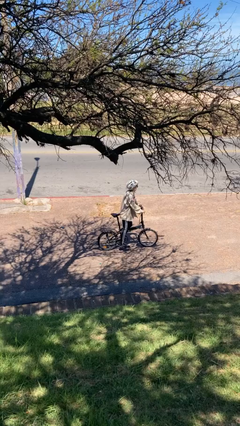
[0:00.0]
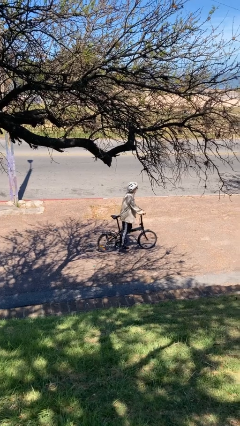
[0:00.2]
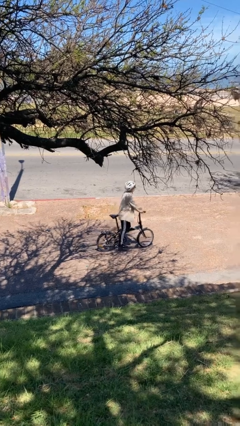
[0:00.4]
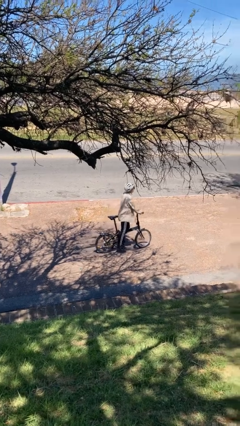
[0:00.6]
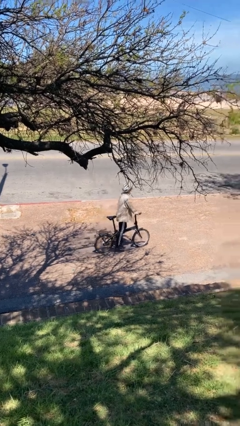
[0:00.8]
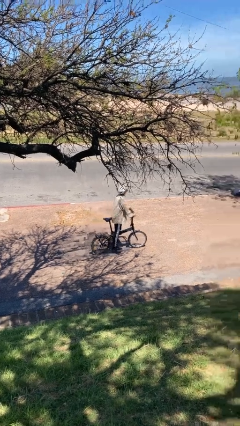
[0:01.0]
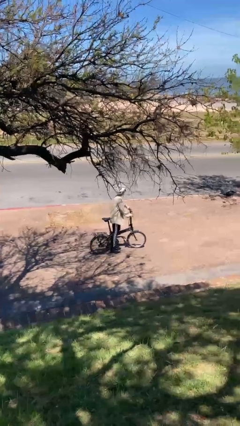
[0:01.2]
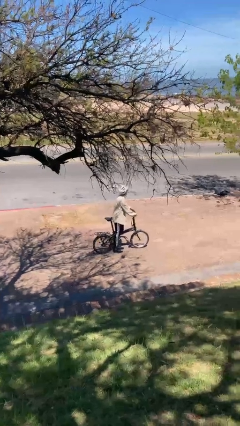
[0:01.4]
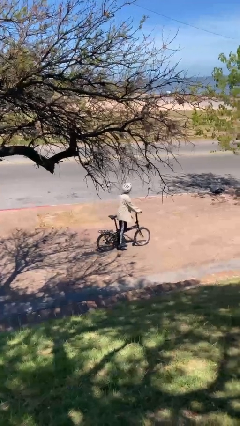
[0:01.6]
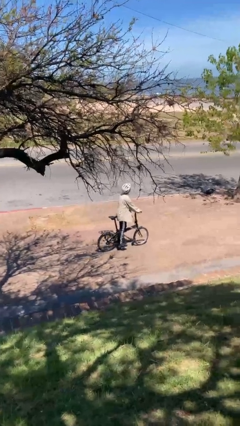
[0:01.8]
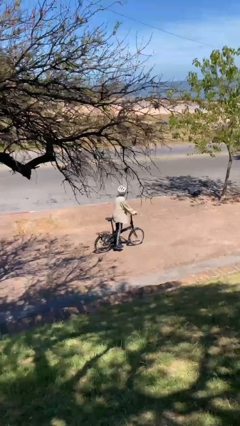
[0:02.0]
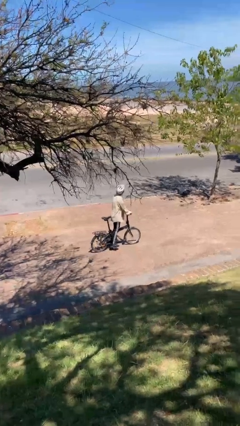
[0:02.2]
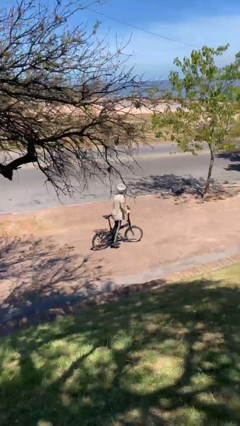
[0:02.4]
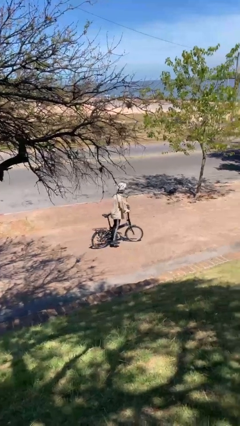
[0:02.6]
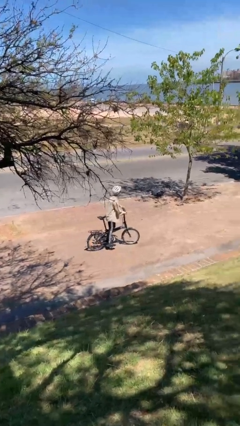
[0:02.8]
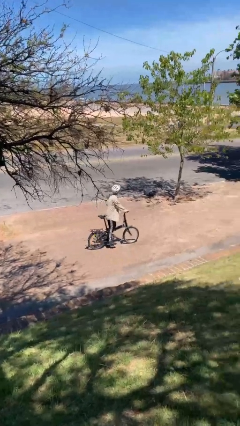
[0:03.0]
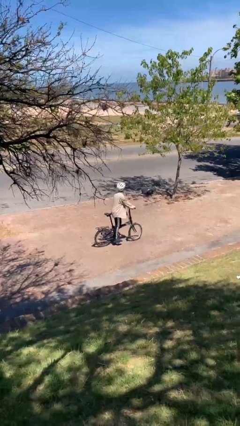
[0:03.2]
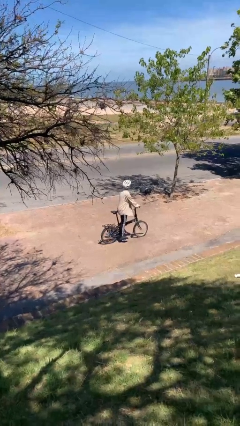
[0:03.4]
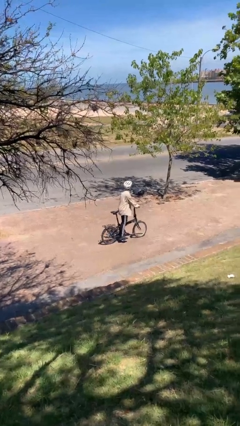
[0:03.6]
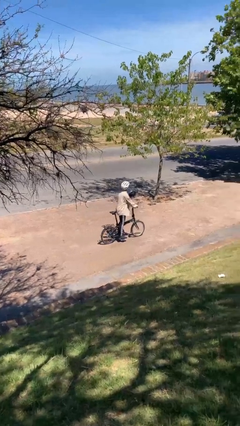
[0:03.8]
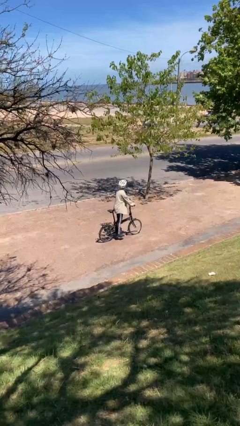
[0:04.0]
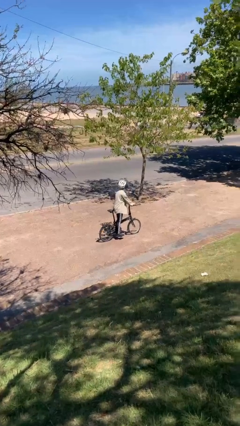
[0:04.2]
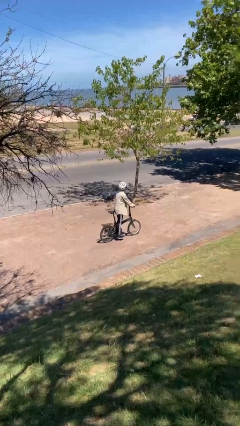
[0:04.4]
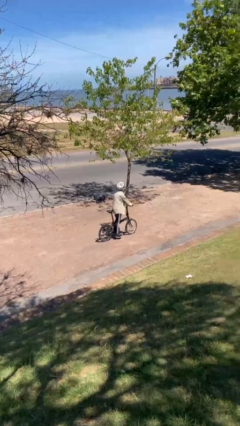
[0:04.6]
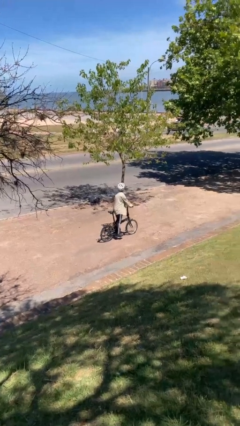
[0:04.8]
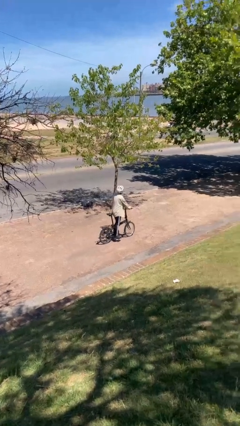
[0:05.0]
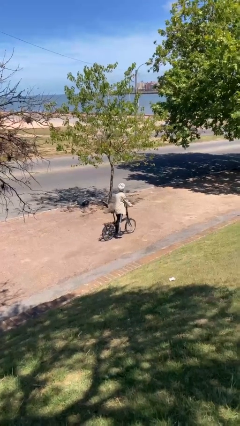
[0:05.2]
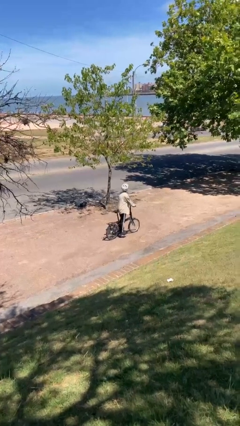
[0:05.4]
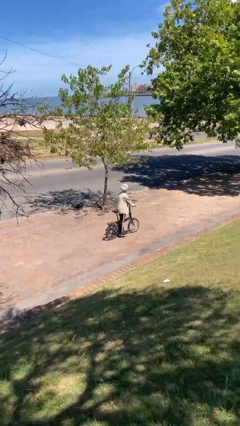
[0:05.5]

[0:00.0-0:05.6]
person rides bicycle

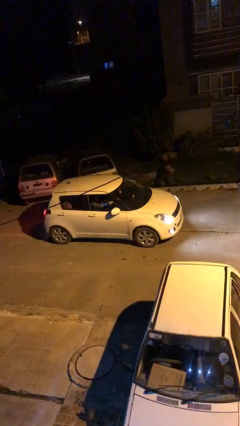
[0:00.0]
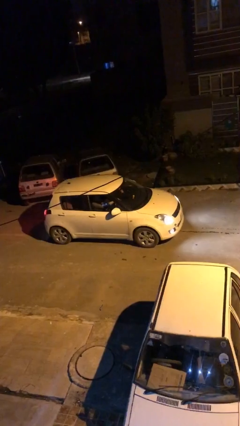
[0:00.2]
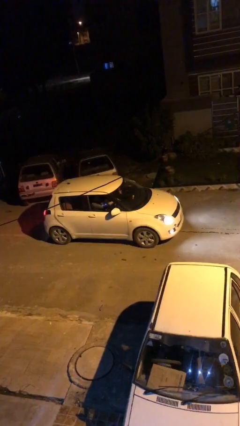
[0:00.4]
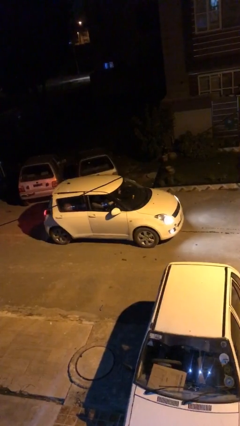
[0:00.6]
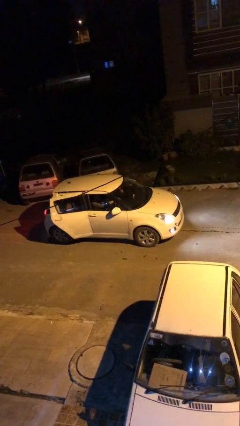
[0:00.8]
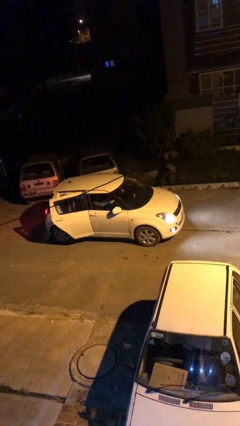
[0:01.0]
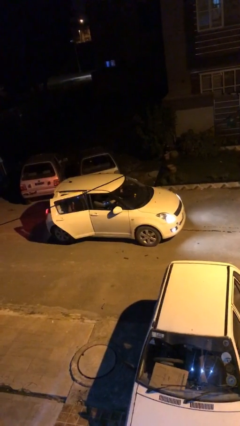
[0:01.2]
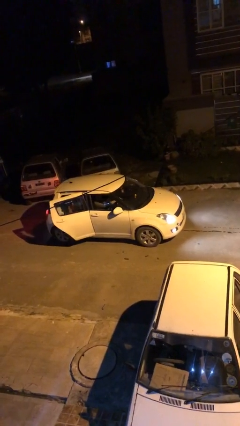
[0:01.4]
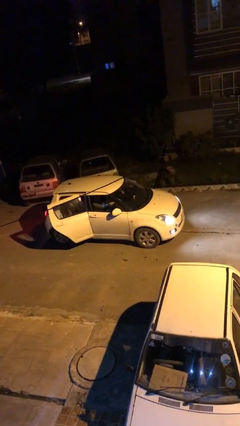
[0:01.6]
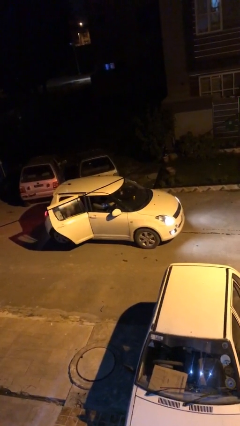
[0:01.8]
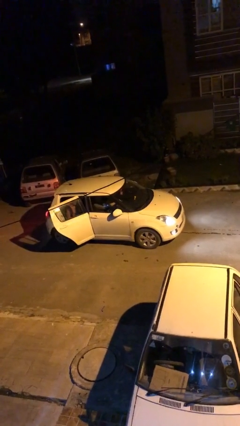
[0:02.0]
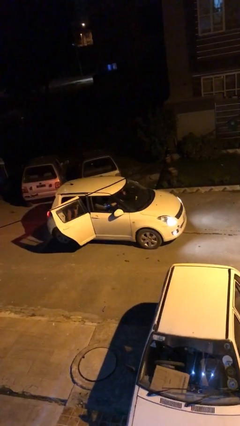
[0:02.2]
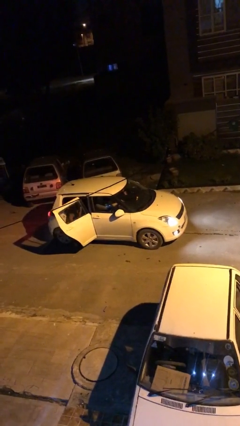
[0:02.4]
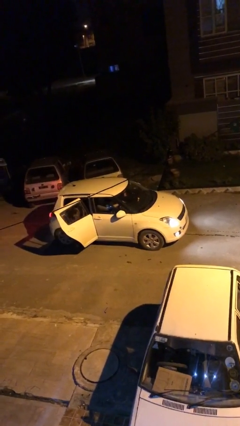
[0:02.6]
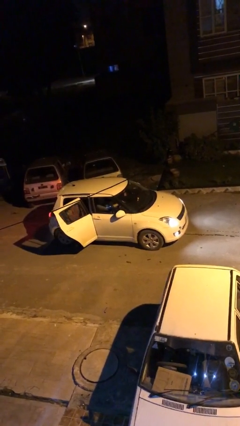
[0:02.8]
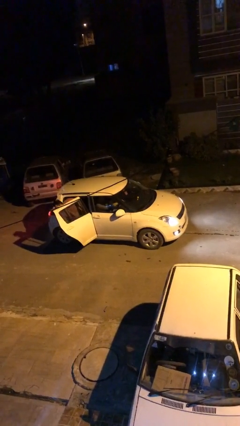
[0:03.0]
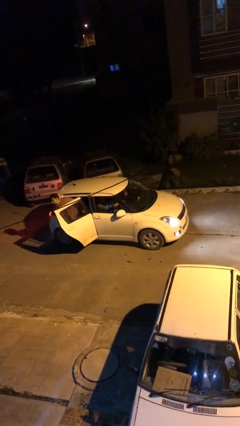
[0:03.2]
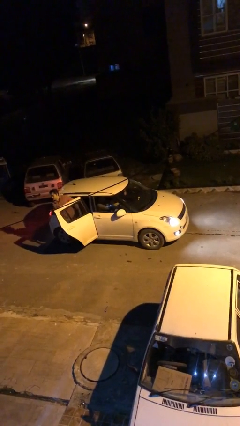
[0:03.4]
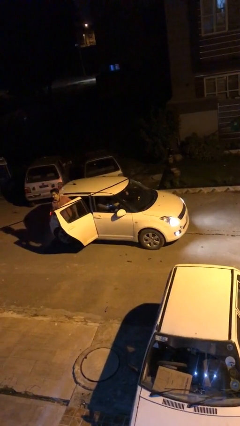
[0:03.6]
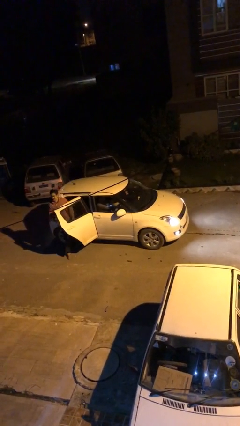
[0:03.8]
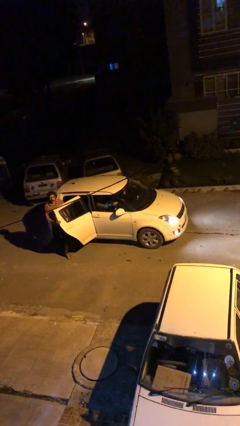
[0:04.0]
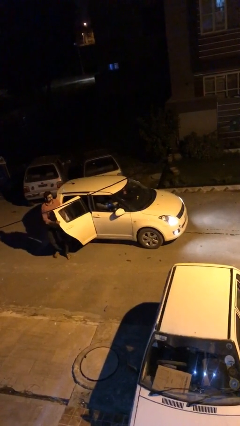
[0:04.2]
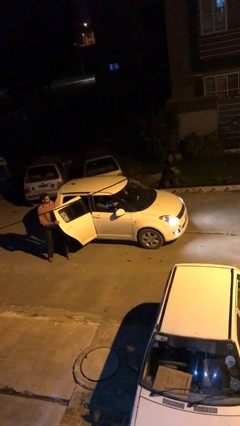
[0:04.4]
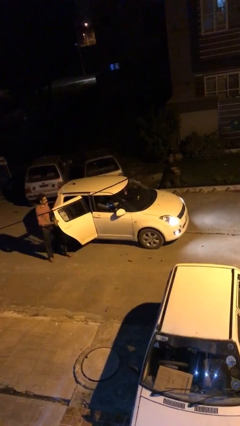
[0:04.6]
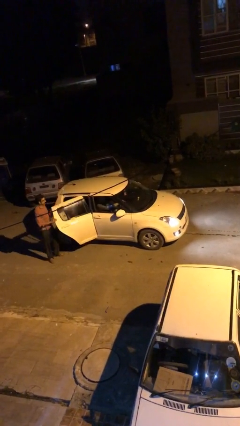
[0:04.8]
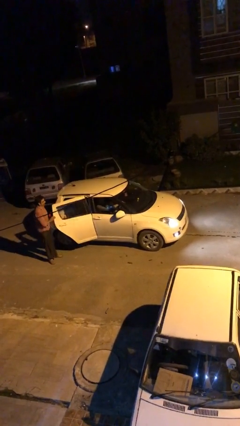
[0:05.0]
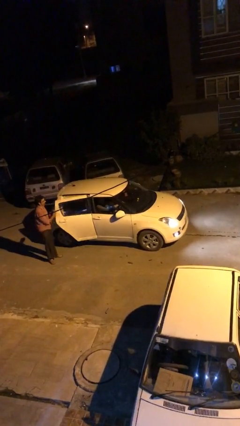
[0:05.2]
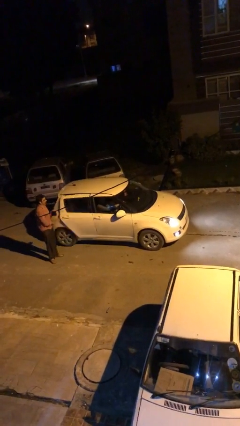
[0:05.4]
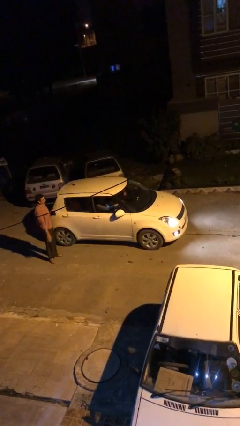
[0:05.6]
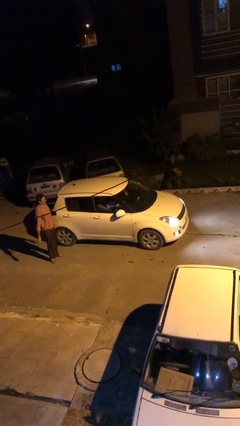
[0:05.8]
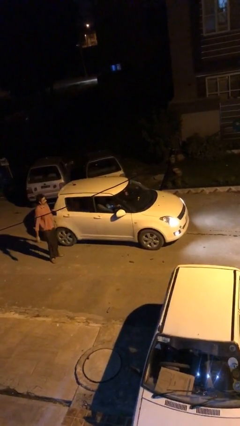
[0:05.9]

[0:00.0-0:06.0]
car drops off person

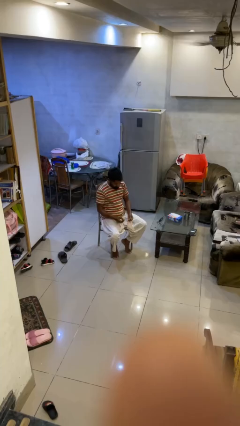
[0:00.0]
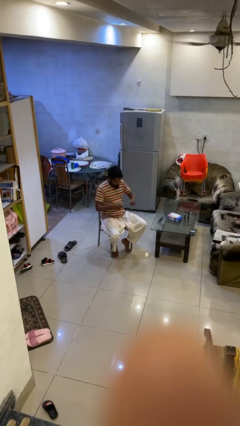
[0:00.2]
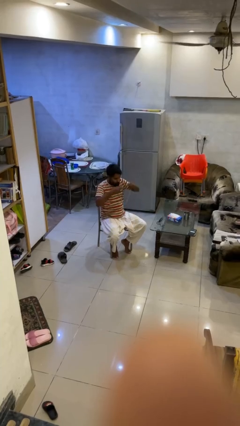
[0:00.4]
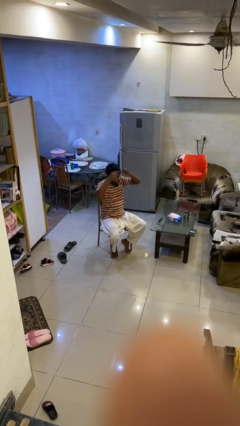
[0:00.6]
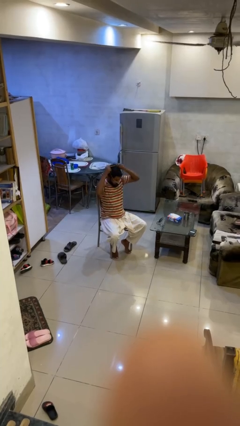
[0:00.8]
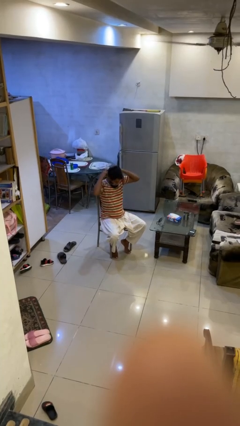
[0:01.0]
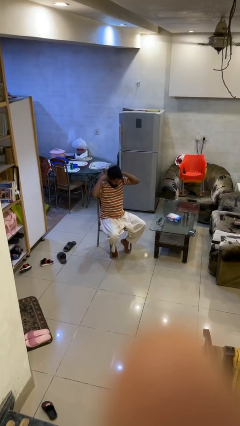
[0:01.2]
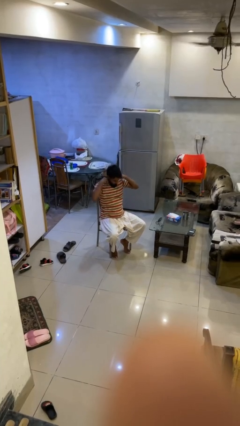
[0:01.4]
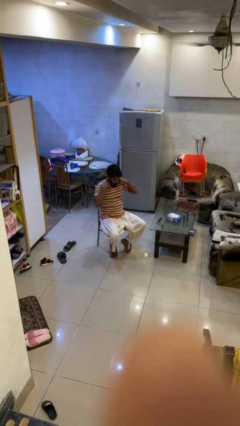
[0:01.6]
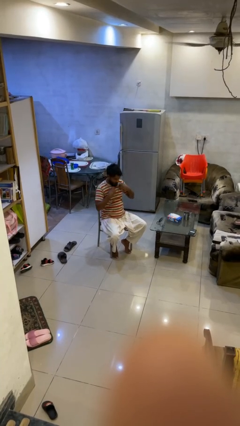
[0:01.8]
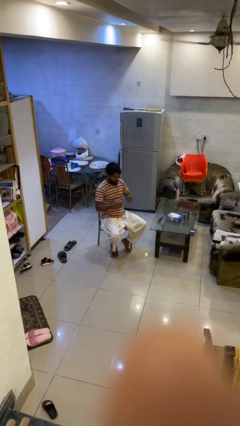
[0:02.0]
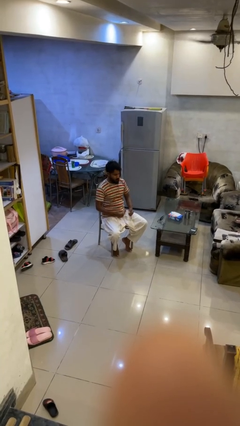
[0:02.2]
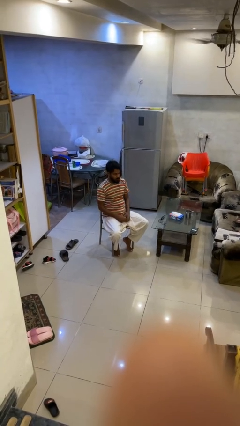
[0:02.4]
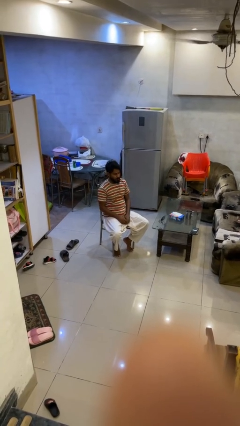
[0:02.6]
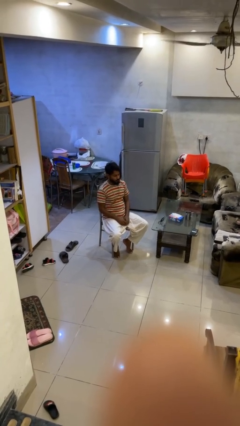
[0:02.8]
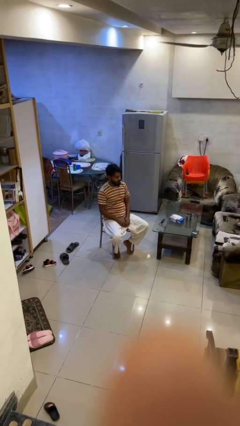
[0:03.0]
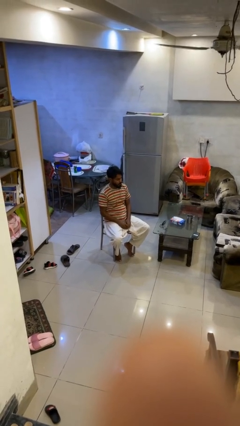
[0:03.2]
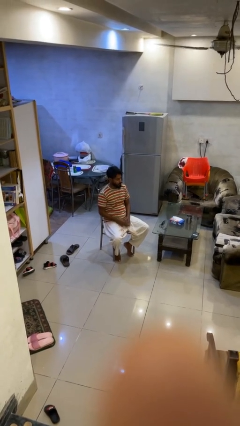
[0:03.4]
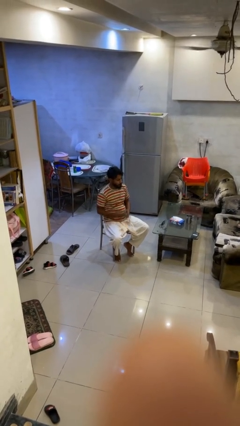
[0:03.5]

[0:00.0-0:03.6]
person puts on necklace

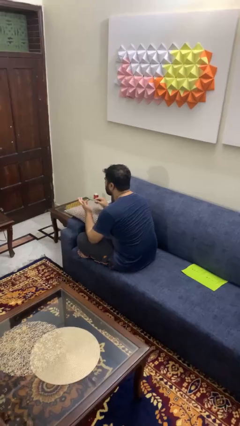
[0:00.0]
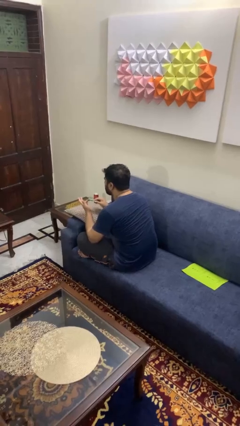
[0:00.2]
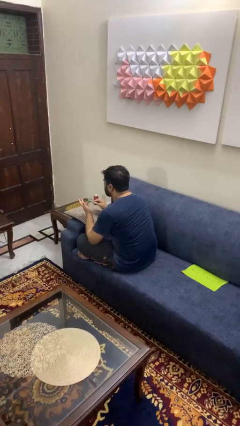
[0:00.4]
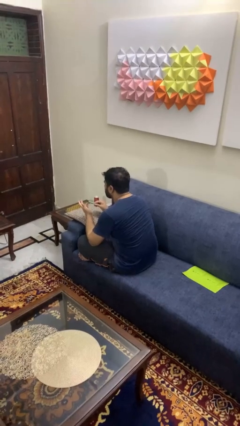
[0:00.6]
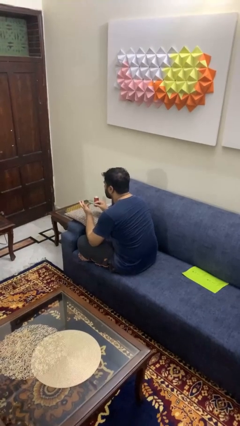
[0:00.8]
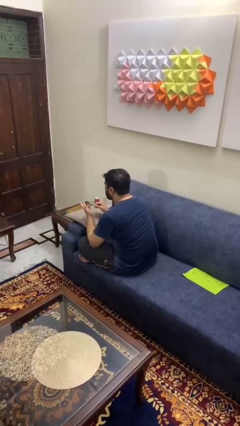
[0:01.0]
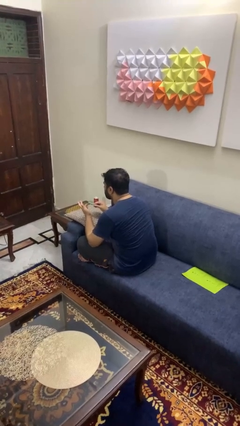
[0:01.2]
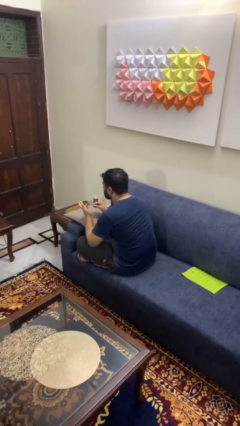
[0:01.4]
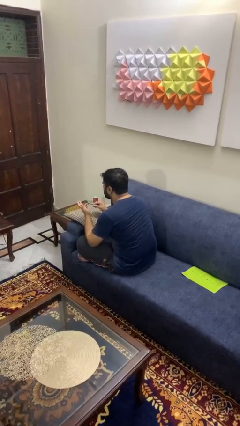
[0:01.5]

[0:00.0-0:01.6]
person files fingernails

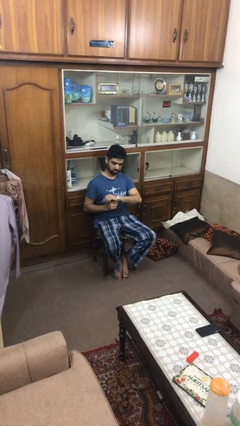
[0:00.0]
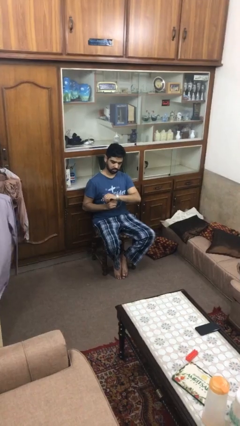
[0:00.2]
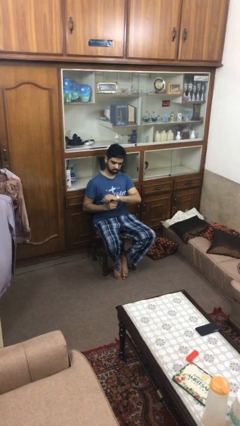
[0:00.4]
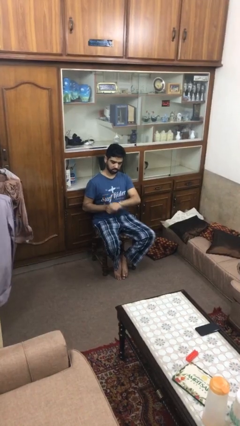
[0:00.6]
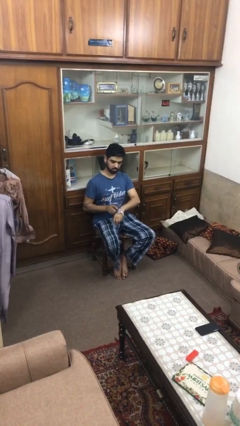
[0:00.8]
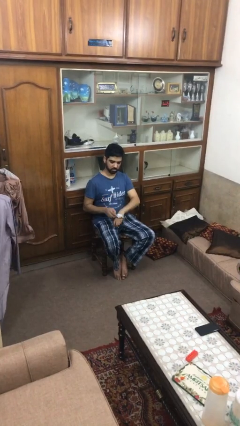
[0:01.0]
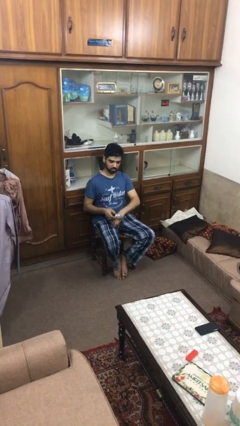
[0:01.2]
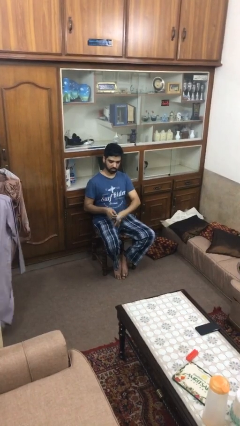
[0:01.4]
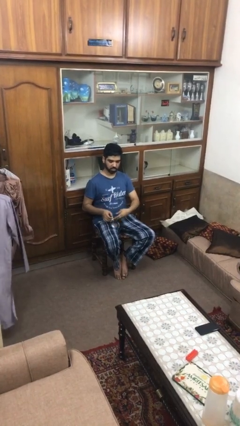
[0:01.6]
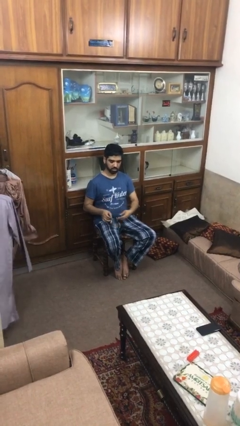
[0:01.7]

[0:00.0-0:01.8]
person takes off wristwatch
